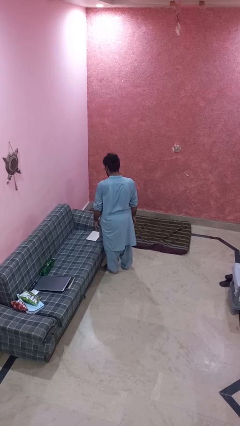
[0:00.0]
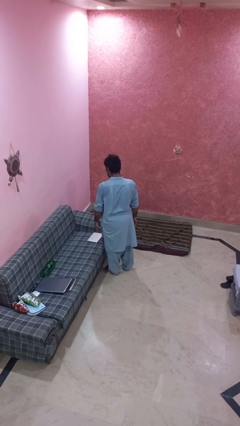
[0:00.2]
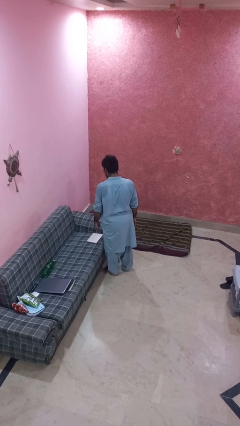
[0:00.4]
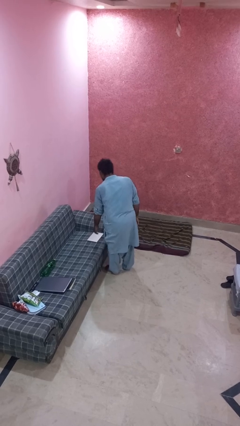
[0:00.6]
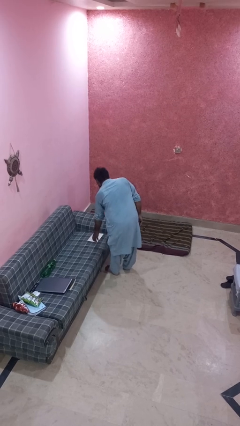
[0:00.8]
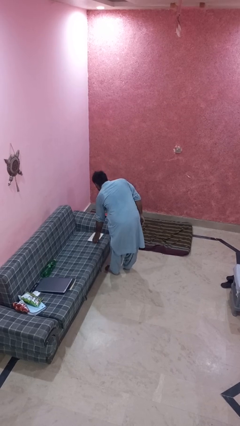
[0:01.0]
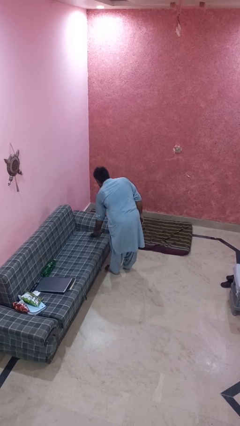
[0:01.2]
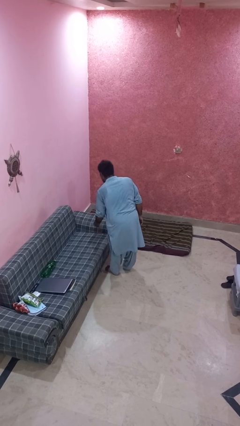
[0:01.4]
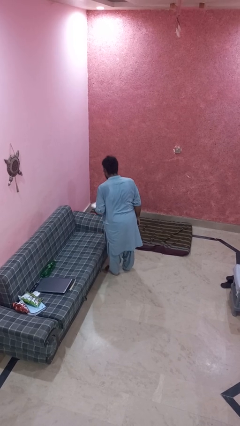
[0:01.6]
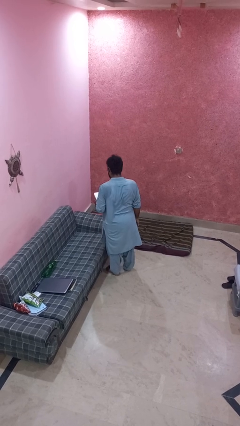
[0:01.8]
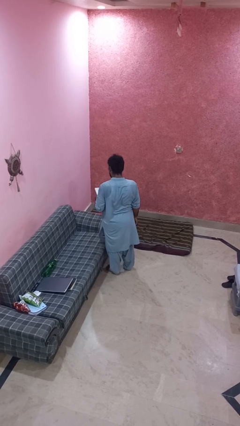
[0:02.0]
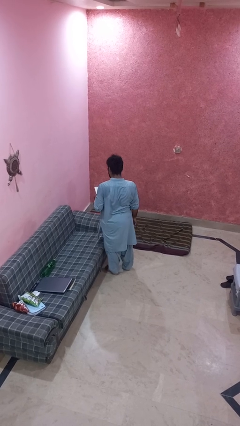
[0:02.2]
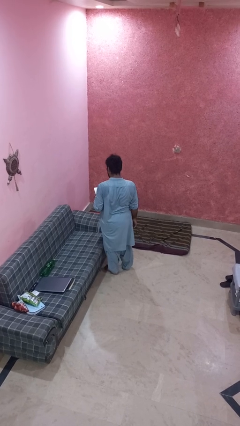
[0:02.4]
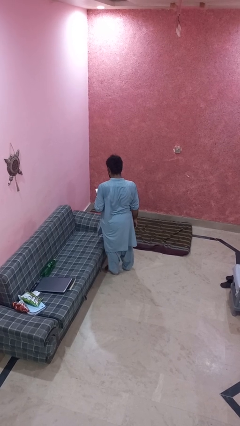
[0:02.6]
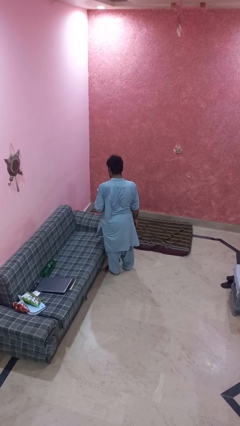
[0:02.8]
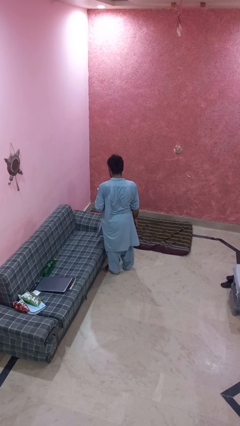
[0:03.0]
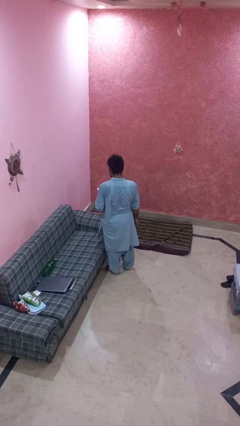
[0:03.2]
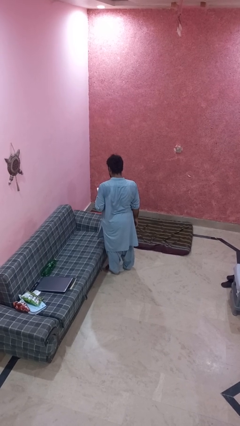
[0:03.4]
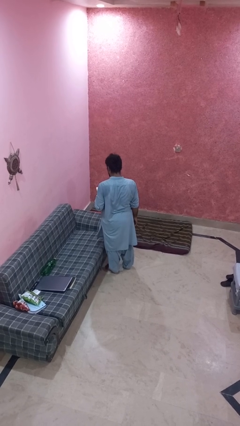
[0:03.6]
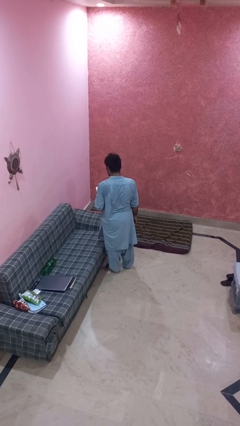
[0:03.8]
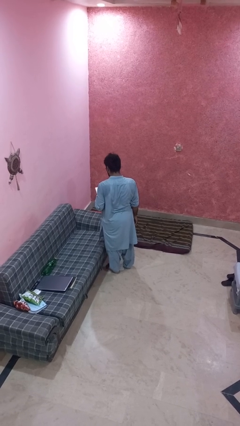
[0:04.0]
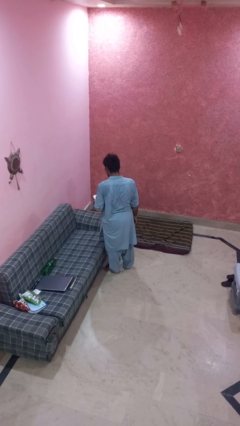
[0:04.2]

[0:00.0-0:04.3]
person picks up object from couch

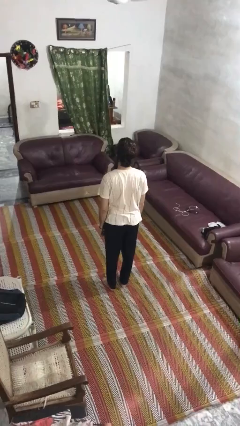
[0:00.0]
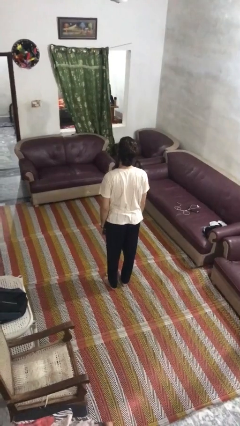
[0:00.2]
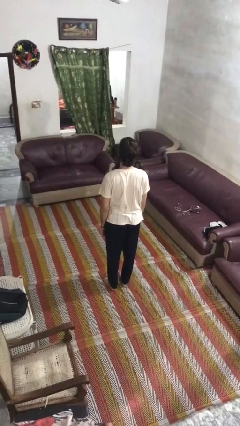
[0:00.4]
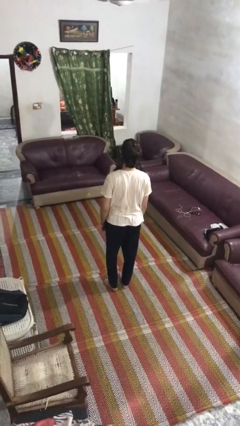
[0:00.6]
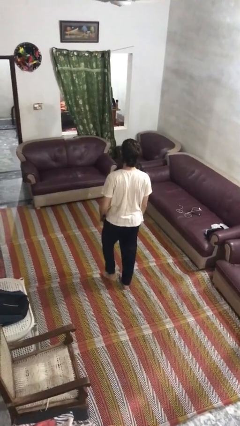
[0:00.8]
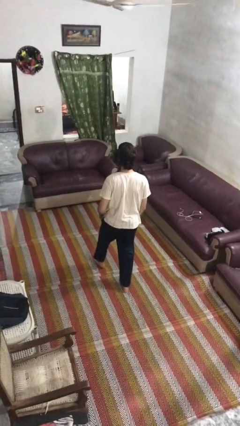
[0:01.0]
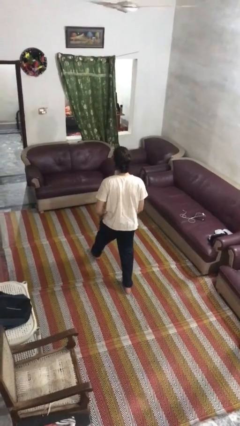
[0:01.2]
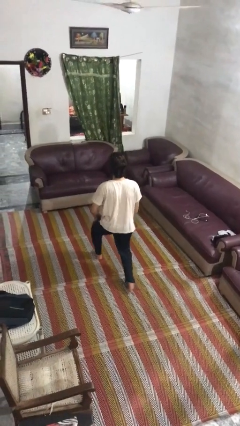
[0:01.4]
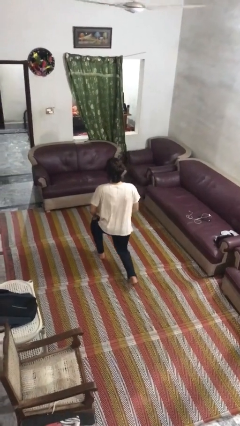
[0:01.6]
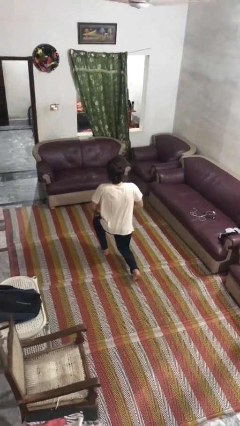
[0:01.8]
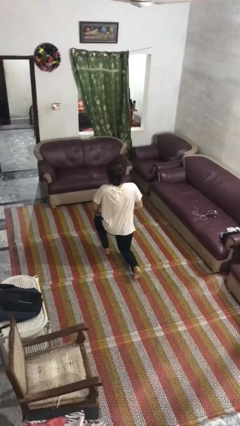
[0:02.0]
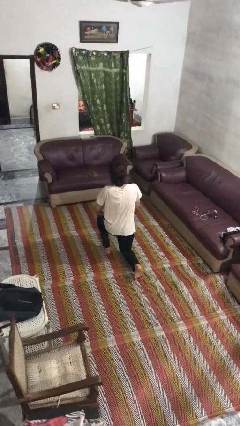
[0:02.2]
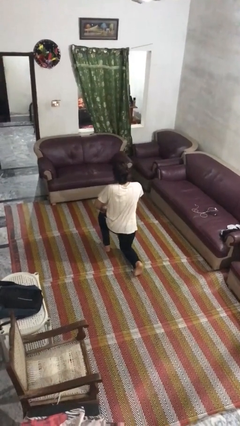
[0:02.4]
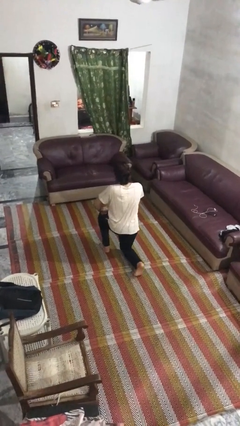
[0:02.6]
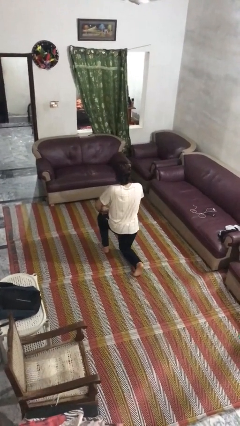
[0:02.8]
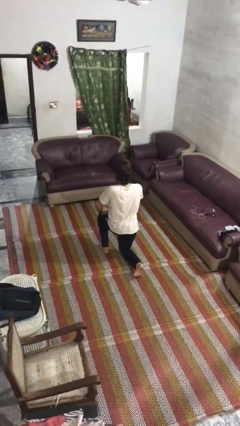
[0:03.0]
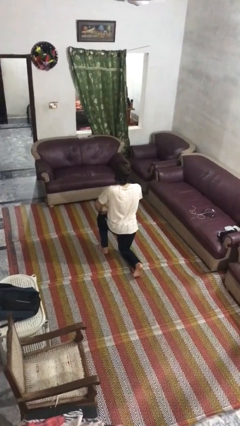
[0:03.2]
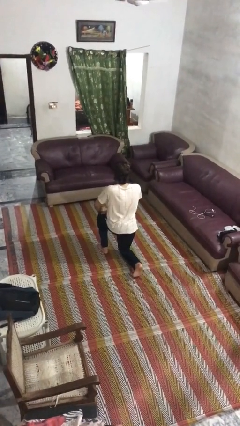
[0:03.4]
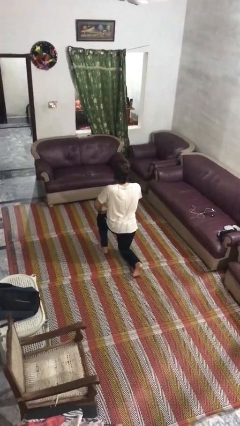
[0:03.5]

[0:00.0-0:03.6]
person kneels

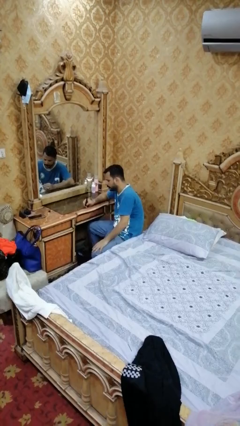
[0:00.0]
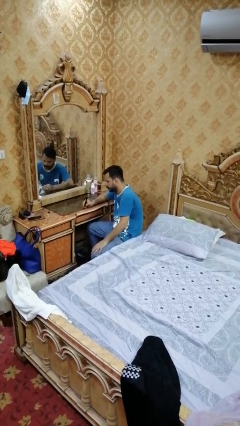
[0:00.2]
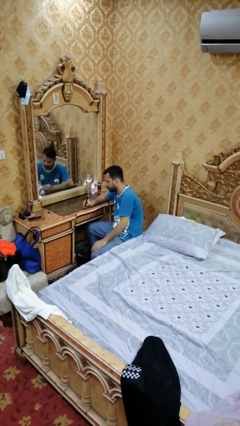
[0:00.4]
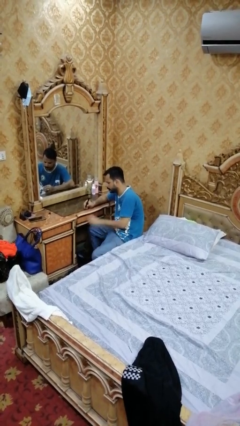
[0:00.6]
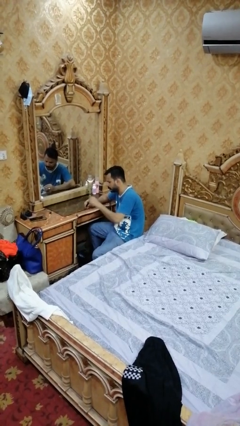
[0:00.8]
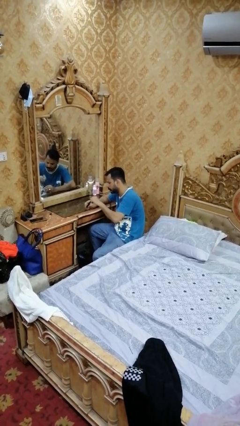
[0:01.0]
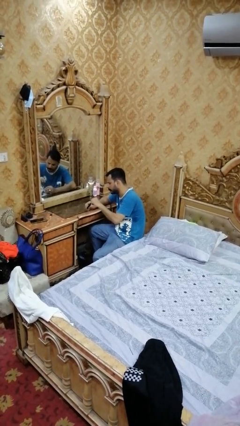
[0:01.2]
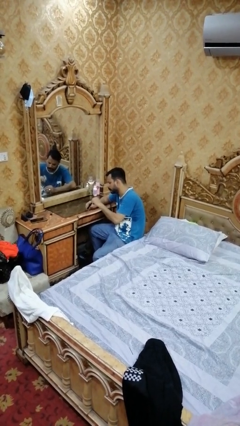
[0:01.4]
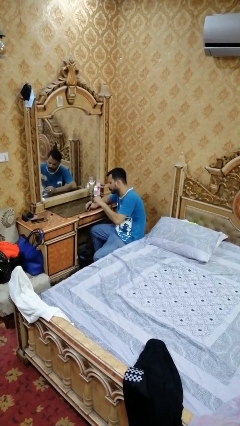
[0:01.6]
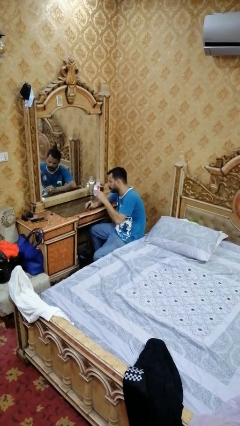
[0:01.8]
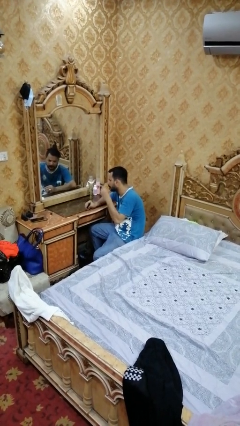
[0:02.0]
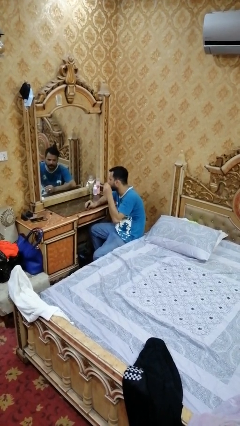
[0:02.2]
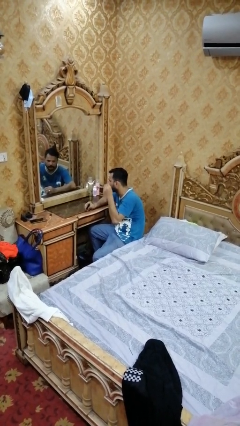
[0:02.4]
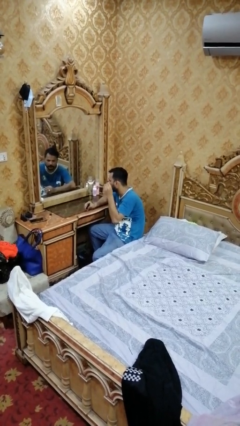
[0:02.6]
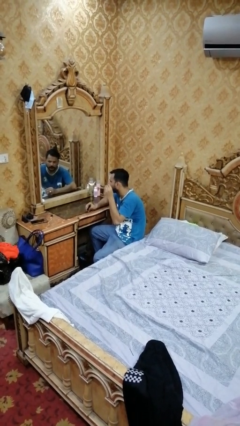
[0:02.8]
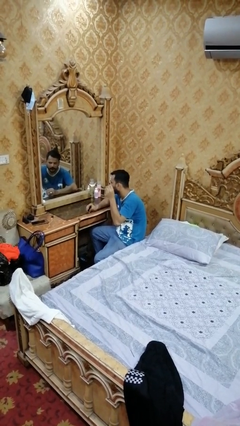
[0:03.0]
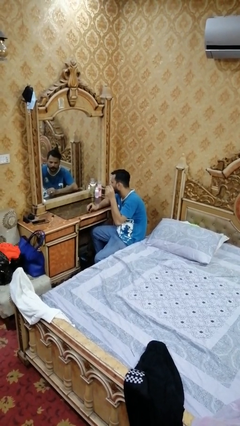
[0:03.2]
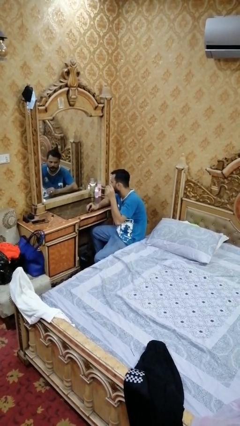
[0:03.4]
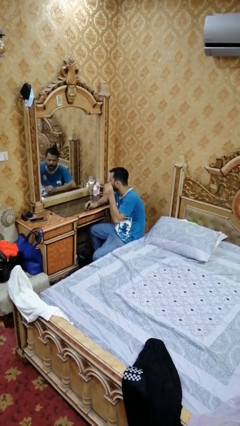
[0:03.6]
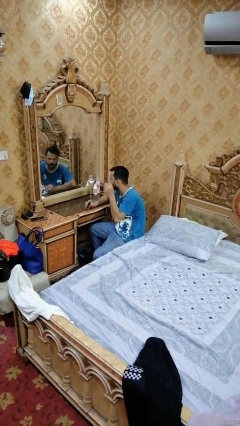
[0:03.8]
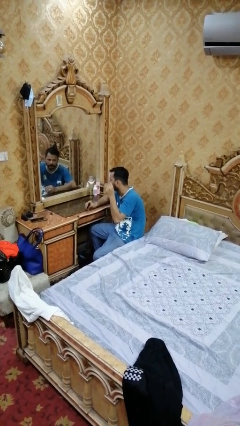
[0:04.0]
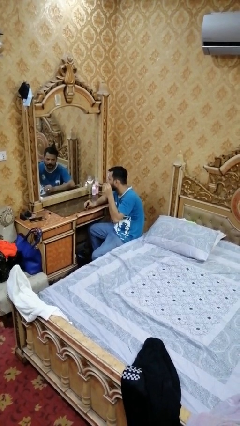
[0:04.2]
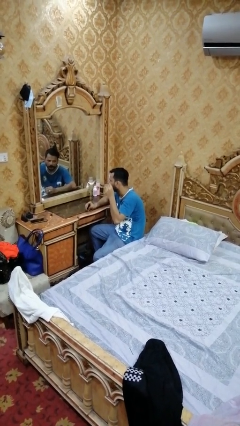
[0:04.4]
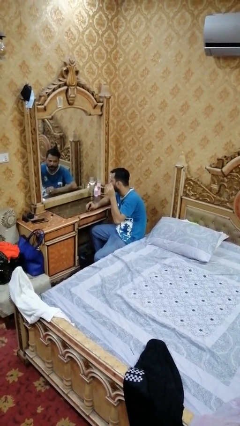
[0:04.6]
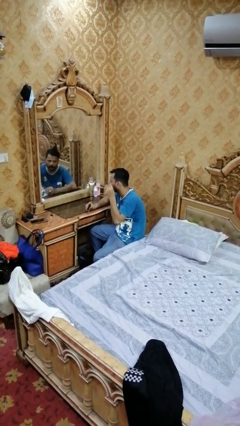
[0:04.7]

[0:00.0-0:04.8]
person applies eye makeup

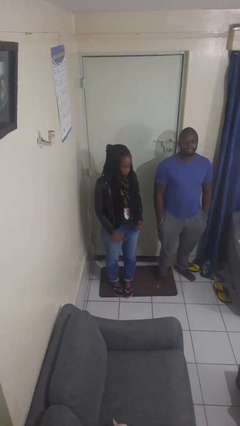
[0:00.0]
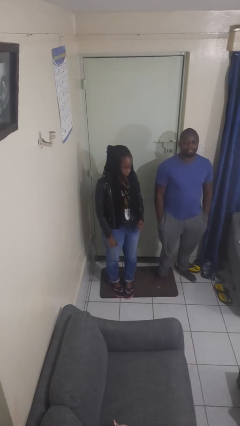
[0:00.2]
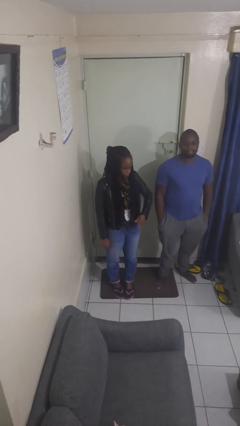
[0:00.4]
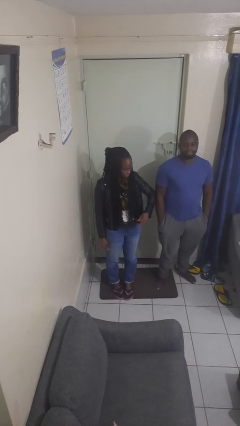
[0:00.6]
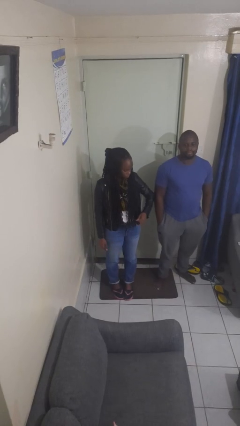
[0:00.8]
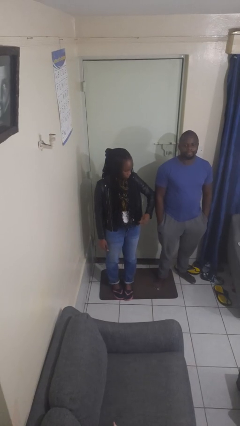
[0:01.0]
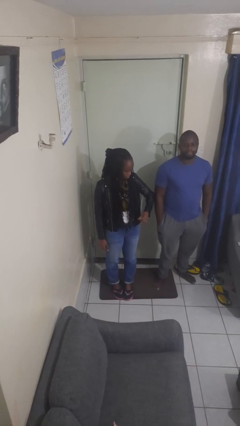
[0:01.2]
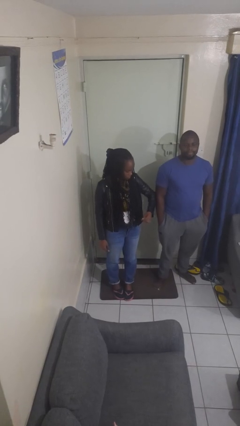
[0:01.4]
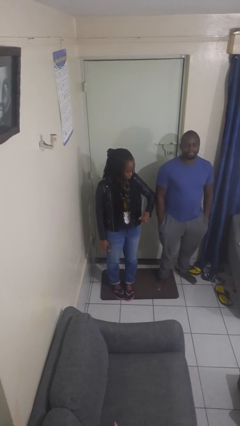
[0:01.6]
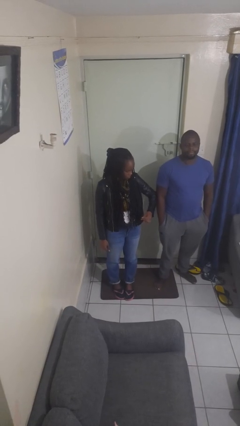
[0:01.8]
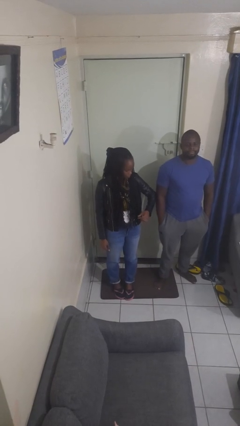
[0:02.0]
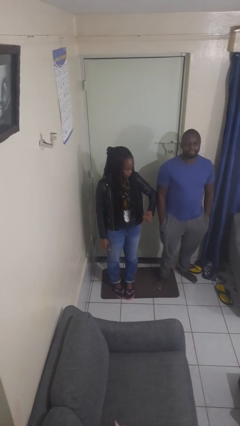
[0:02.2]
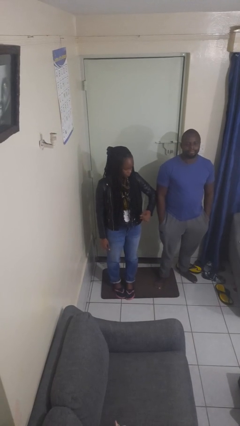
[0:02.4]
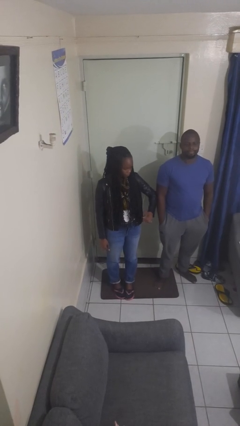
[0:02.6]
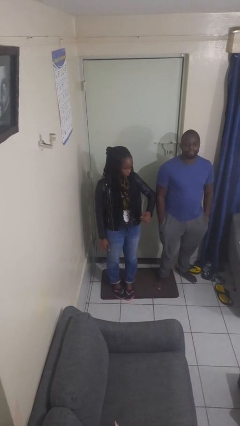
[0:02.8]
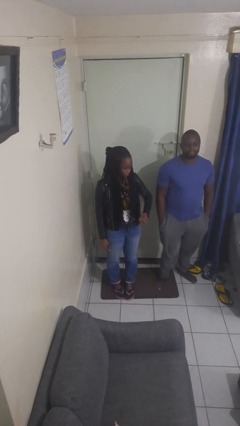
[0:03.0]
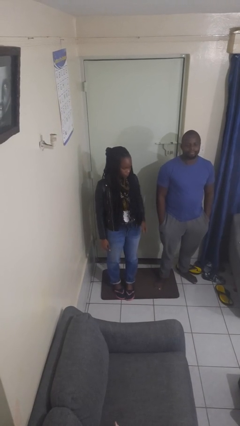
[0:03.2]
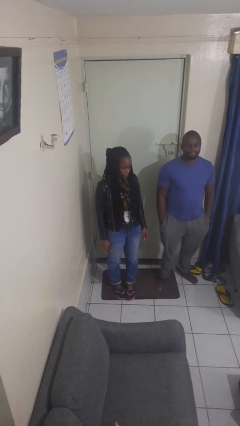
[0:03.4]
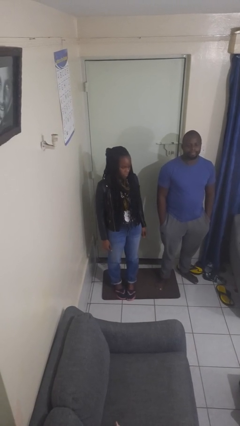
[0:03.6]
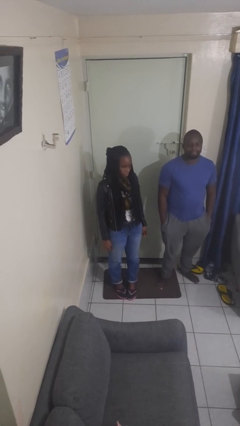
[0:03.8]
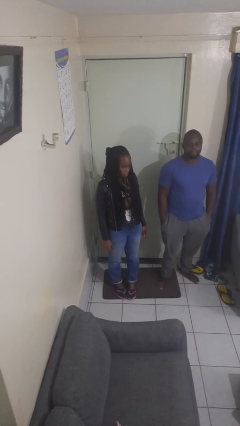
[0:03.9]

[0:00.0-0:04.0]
person nudges person with elbow

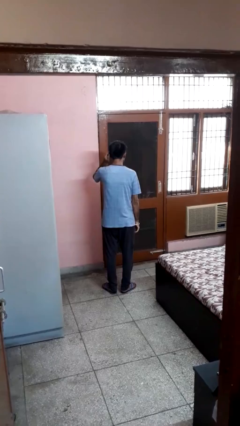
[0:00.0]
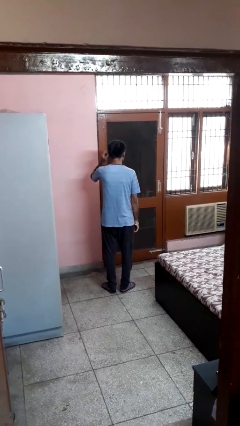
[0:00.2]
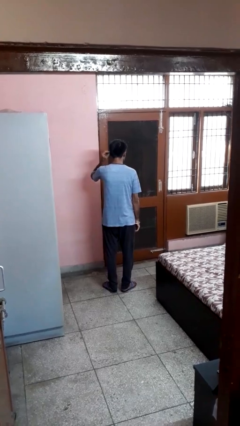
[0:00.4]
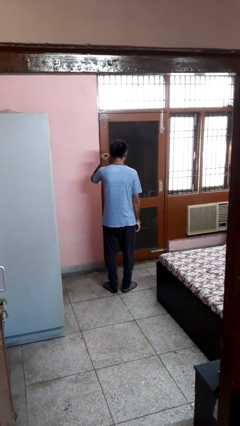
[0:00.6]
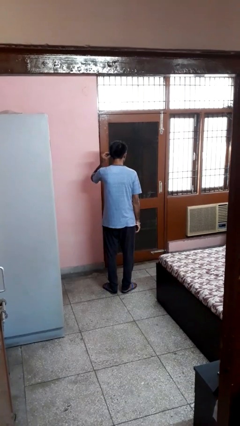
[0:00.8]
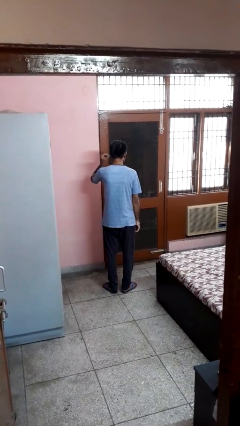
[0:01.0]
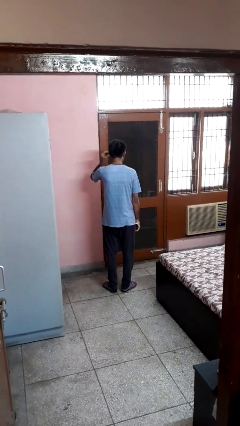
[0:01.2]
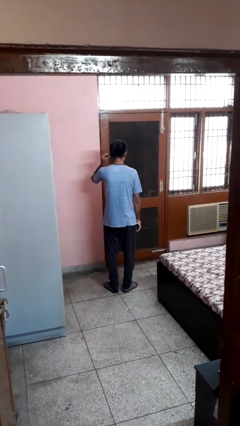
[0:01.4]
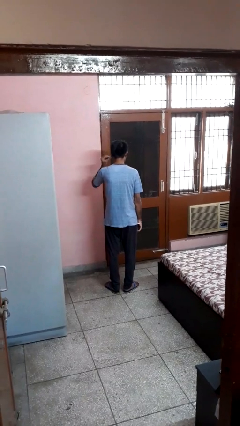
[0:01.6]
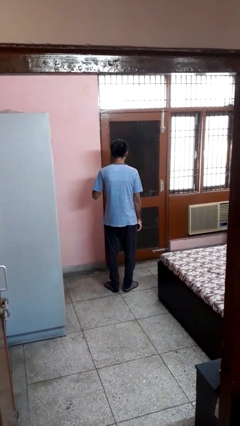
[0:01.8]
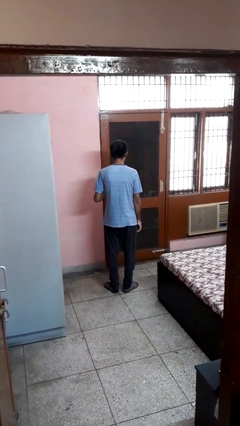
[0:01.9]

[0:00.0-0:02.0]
person touches earlobe
